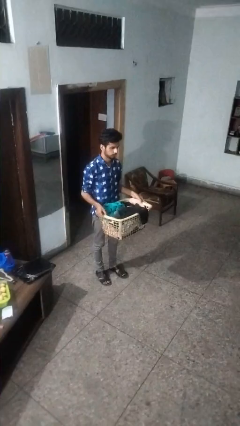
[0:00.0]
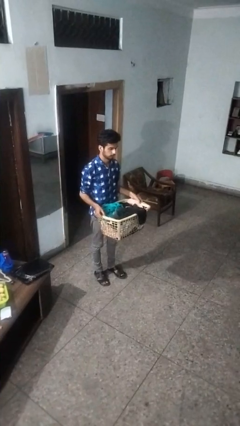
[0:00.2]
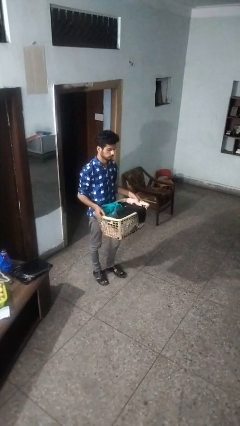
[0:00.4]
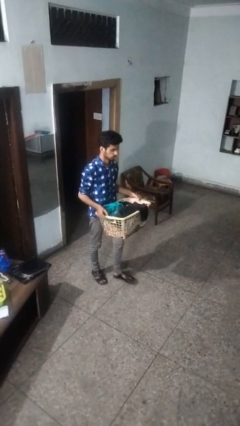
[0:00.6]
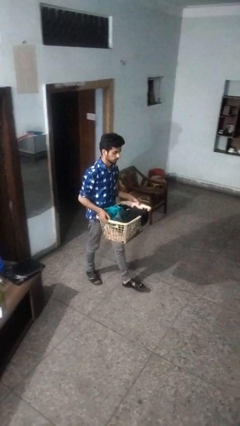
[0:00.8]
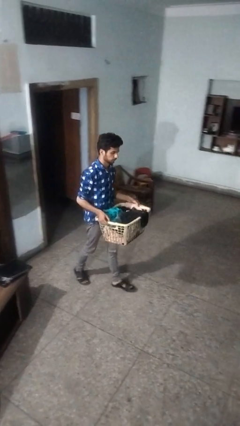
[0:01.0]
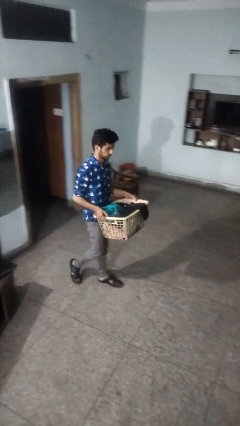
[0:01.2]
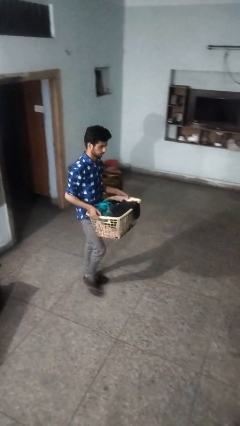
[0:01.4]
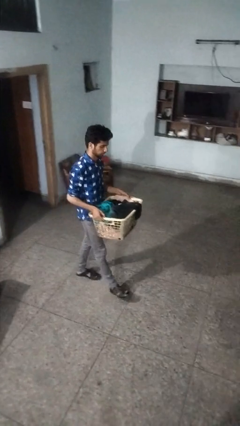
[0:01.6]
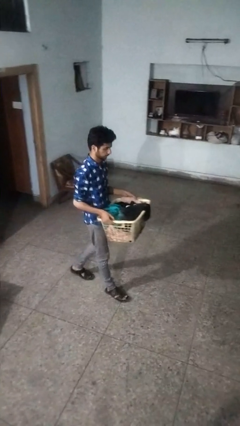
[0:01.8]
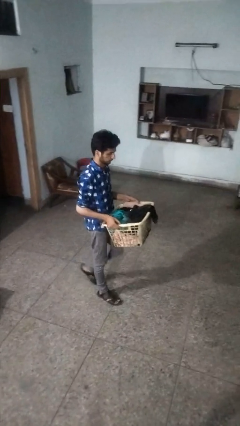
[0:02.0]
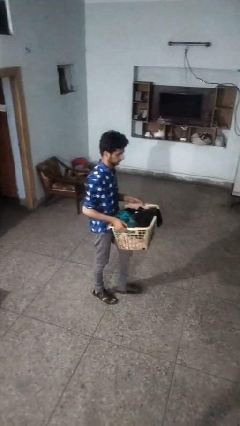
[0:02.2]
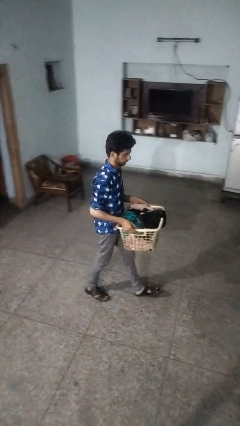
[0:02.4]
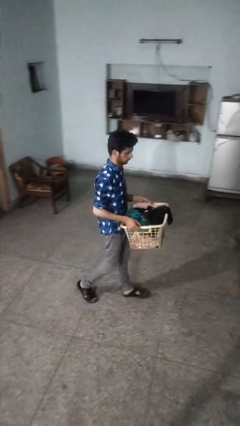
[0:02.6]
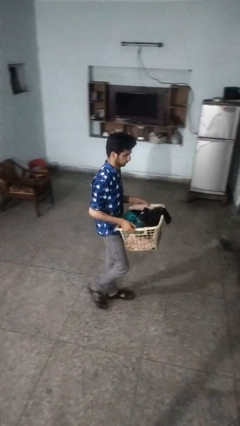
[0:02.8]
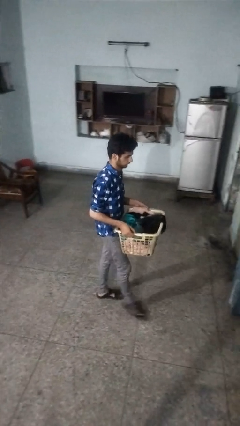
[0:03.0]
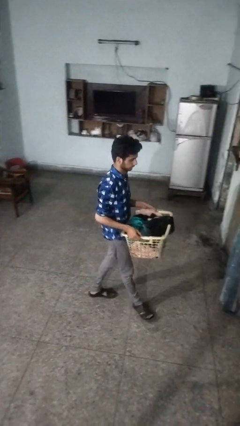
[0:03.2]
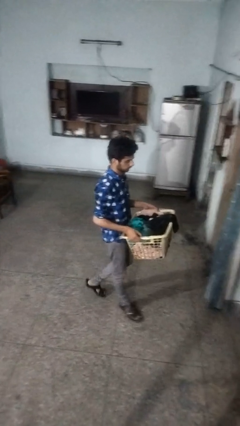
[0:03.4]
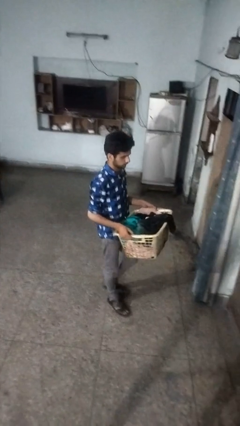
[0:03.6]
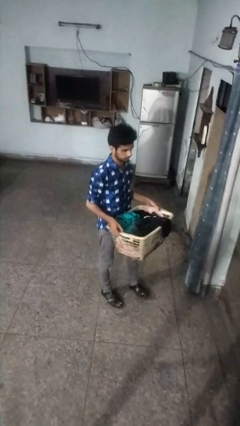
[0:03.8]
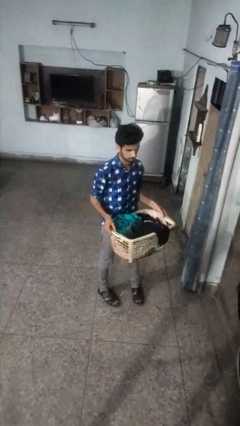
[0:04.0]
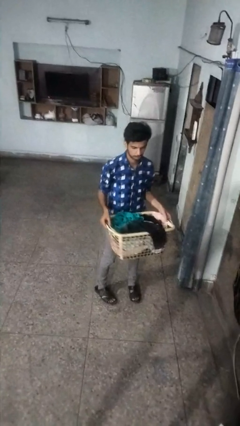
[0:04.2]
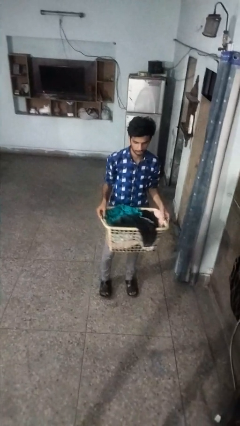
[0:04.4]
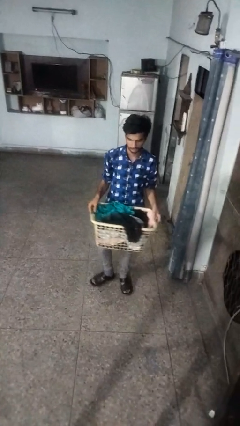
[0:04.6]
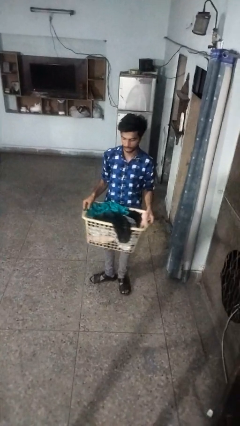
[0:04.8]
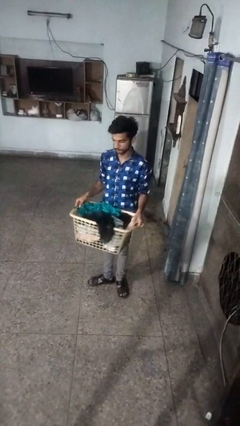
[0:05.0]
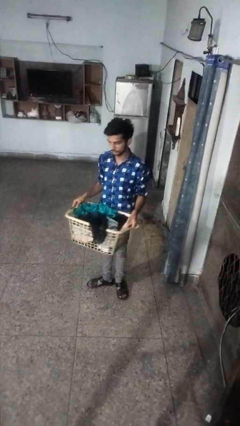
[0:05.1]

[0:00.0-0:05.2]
person carries laundry basket

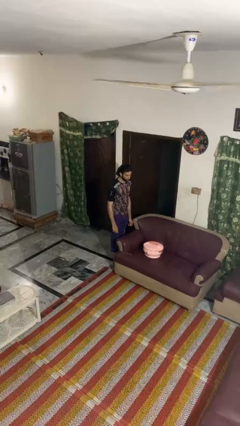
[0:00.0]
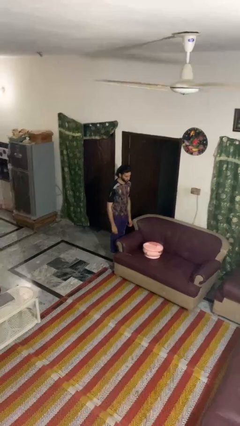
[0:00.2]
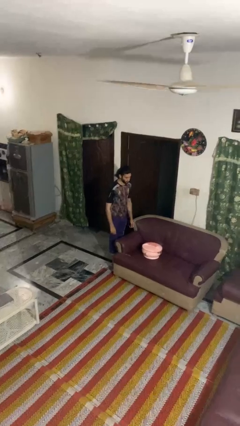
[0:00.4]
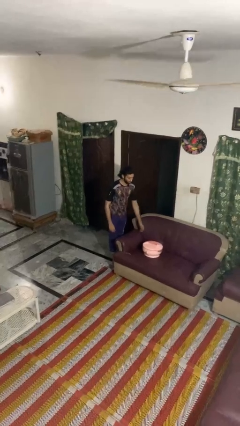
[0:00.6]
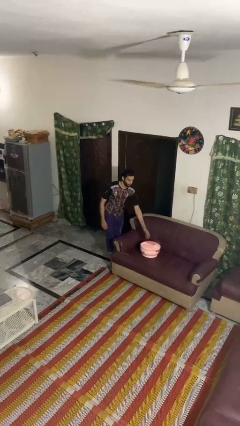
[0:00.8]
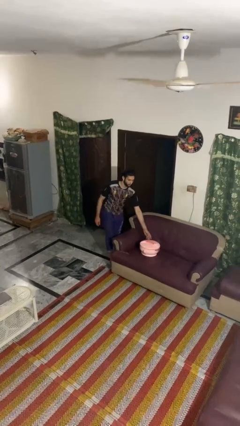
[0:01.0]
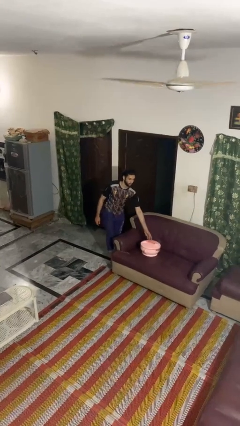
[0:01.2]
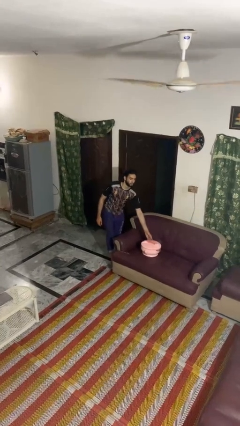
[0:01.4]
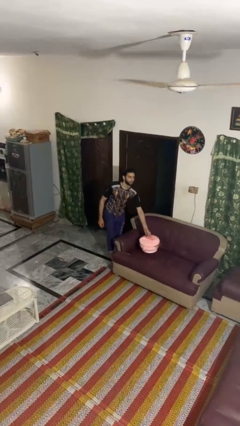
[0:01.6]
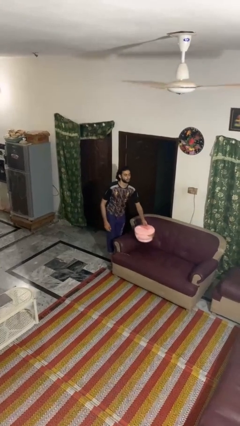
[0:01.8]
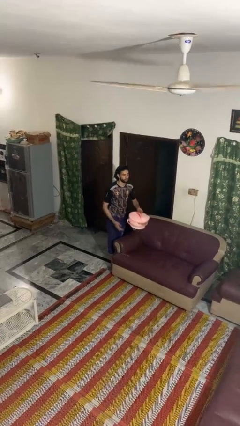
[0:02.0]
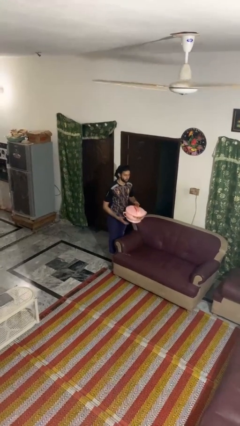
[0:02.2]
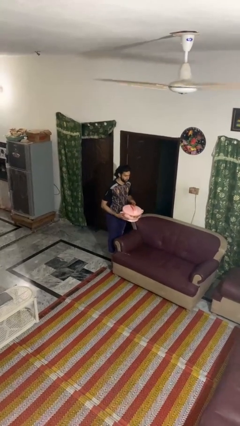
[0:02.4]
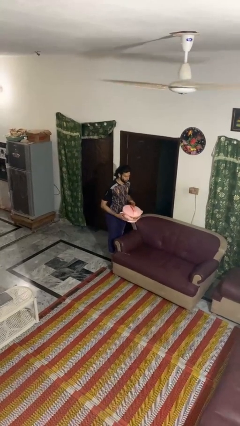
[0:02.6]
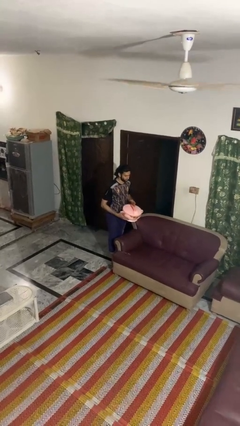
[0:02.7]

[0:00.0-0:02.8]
person picks up object from couch

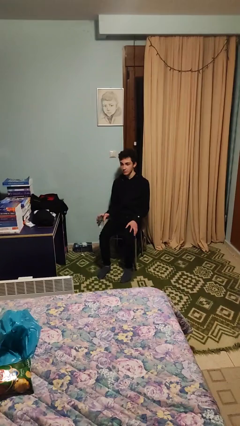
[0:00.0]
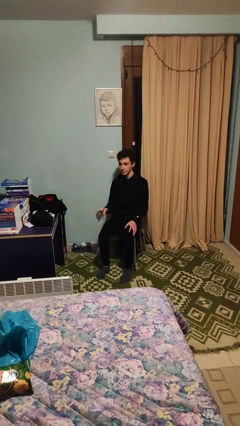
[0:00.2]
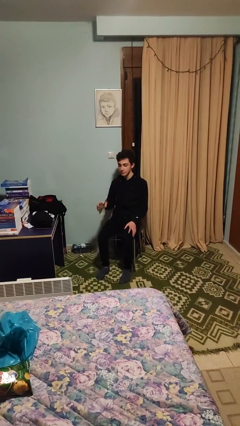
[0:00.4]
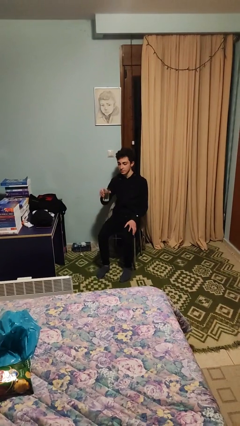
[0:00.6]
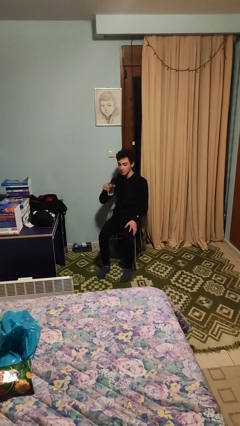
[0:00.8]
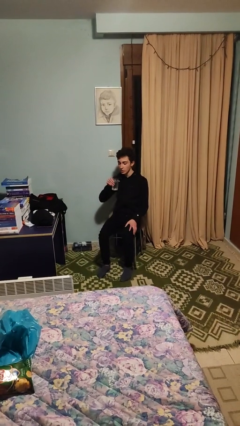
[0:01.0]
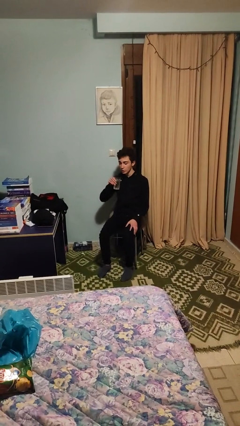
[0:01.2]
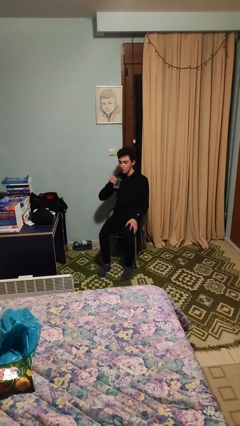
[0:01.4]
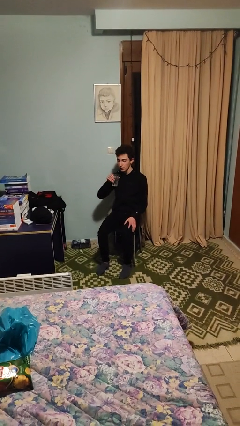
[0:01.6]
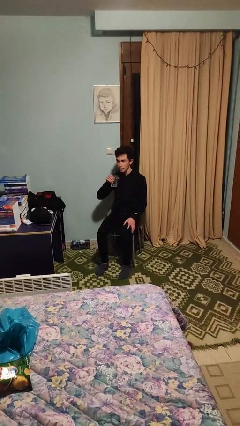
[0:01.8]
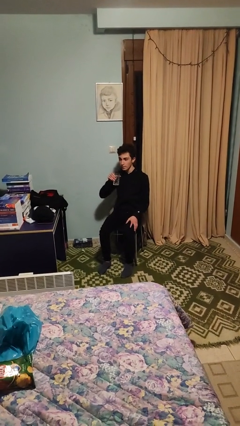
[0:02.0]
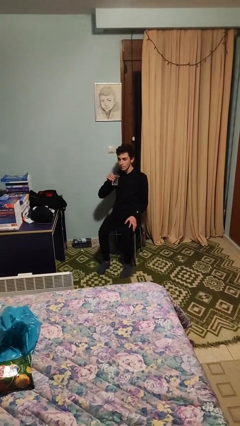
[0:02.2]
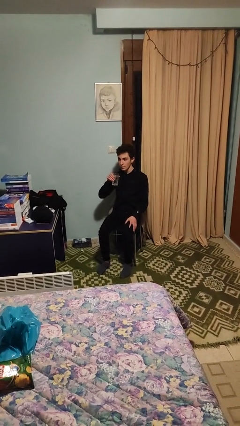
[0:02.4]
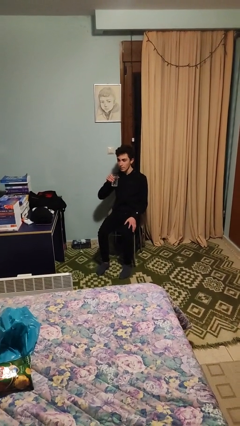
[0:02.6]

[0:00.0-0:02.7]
person drinks from straw

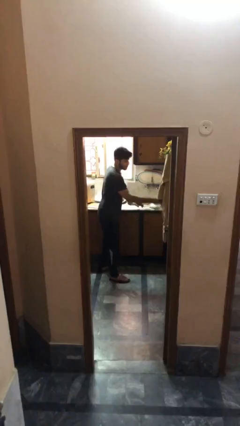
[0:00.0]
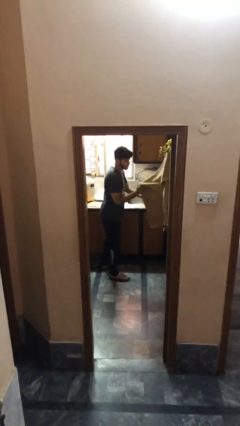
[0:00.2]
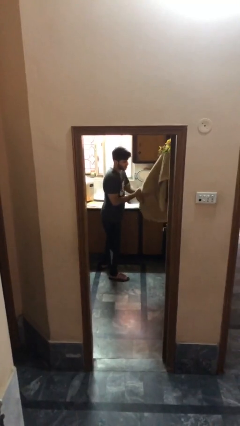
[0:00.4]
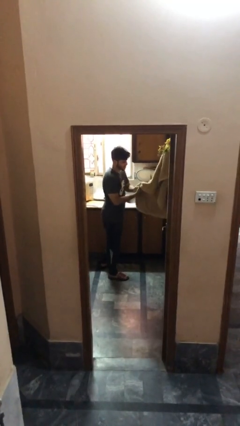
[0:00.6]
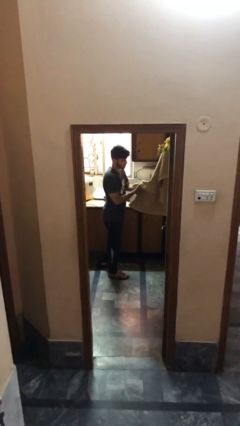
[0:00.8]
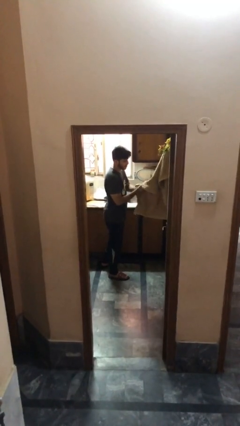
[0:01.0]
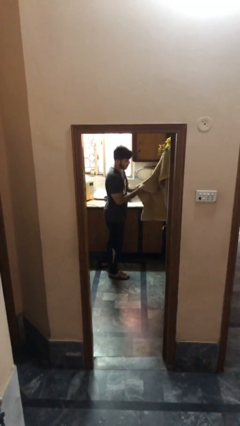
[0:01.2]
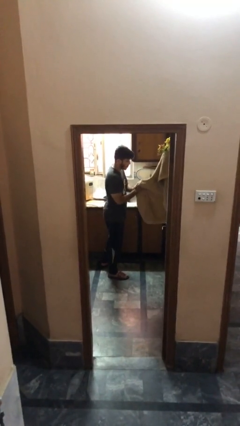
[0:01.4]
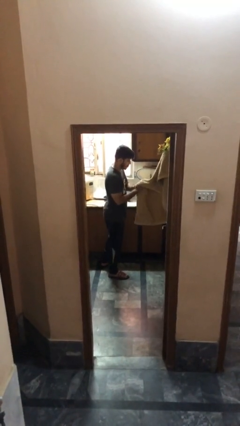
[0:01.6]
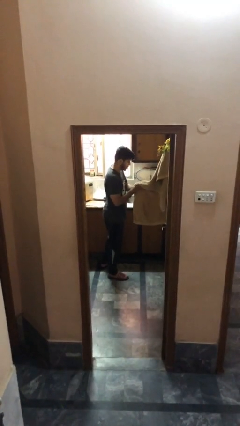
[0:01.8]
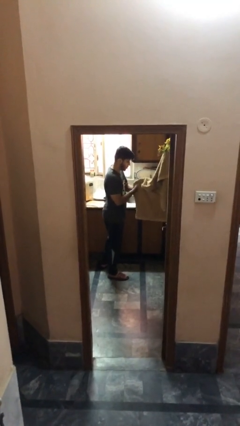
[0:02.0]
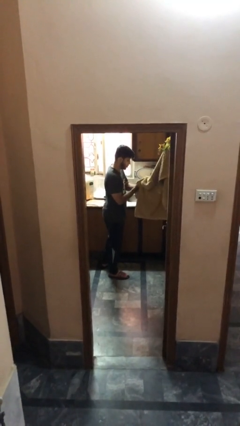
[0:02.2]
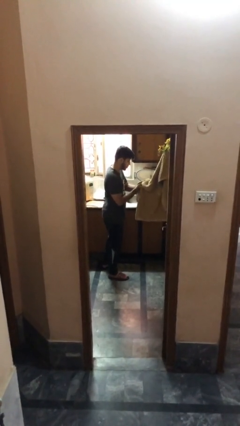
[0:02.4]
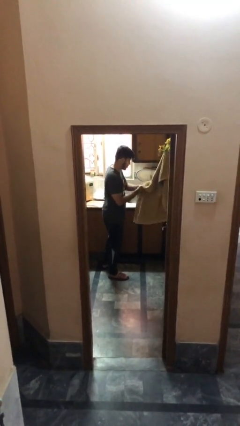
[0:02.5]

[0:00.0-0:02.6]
person dries hands with towel

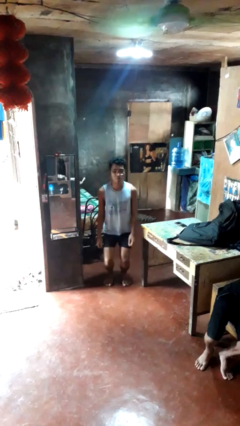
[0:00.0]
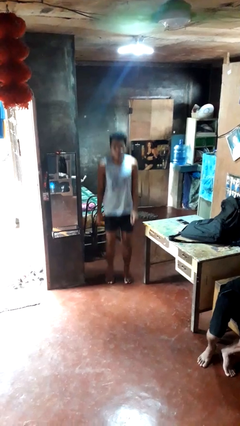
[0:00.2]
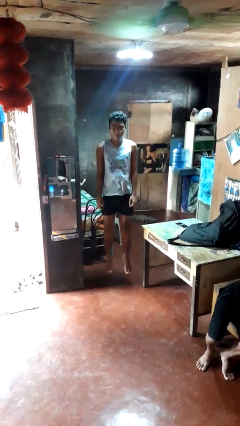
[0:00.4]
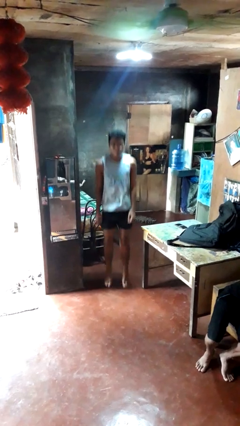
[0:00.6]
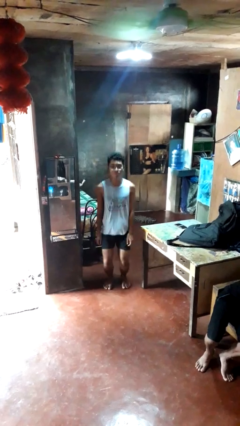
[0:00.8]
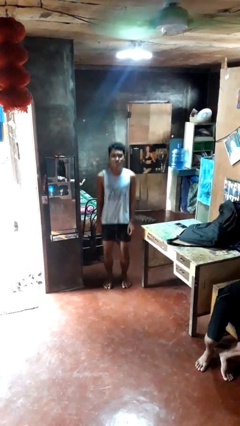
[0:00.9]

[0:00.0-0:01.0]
person jumps

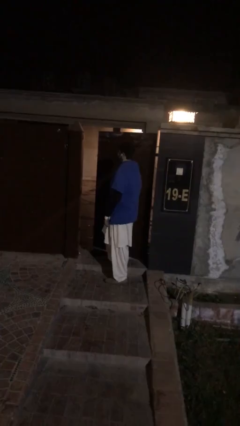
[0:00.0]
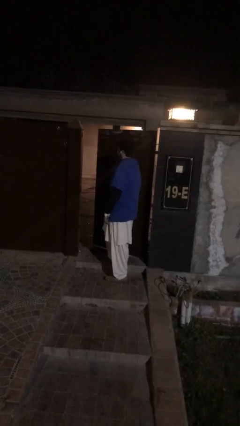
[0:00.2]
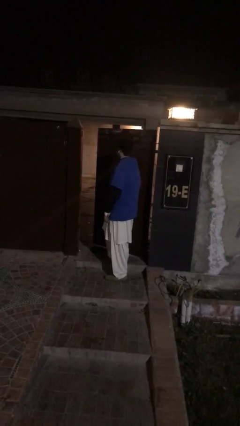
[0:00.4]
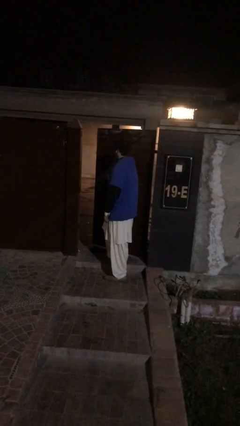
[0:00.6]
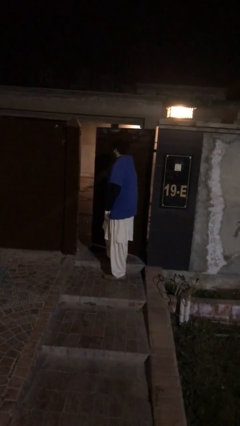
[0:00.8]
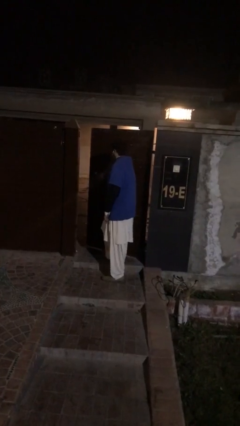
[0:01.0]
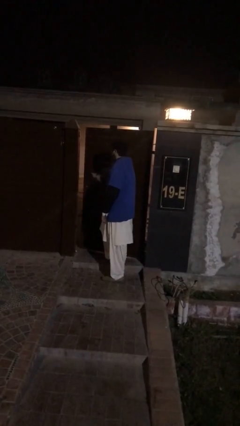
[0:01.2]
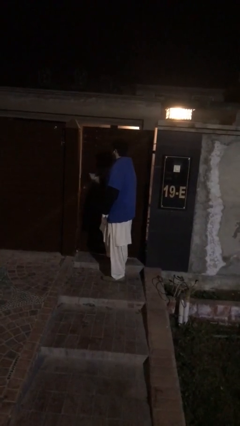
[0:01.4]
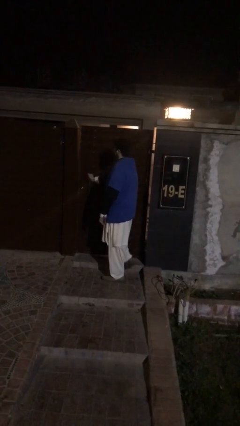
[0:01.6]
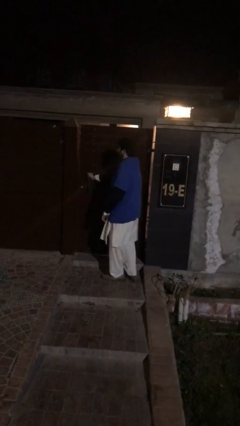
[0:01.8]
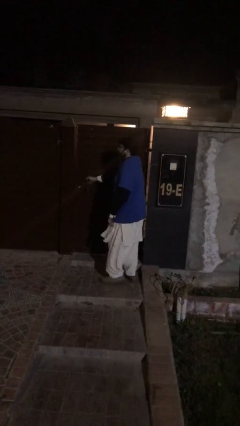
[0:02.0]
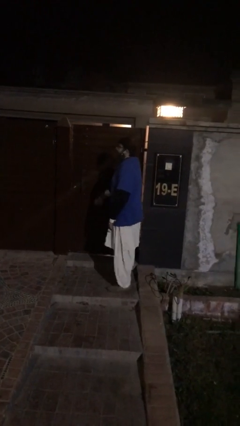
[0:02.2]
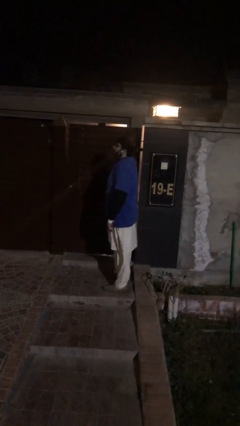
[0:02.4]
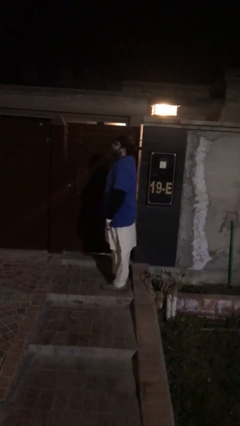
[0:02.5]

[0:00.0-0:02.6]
person closes facility door

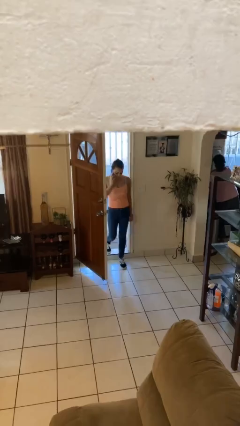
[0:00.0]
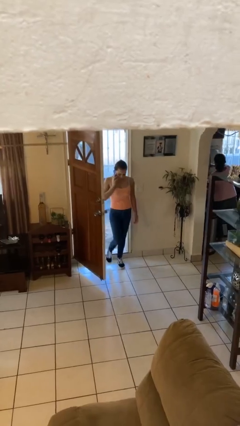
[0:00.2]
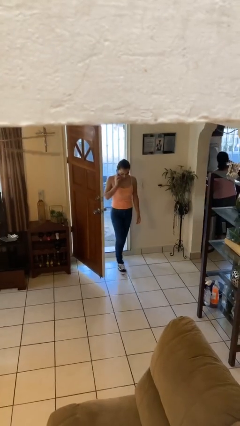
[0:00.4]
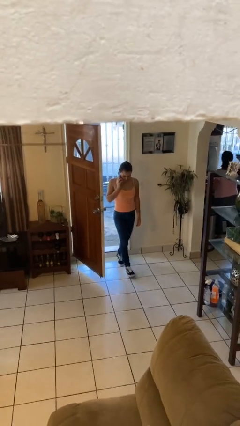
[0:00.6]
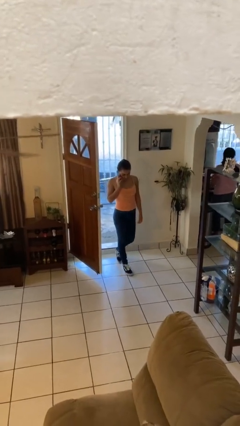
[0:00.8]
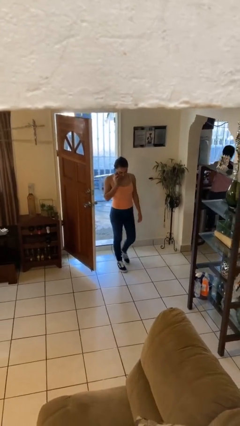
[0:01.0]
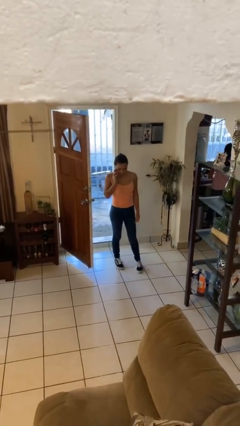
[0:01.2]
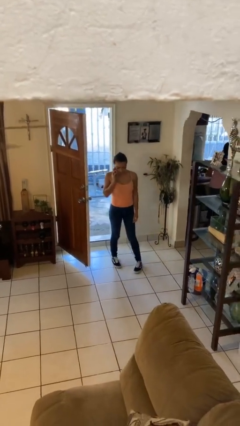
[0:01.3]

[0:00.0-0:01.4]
person enters scene through structure
